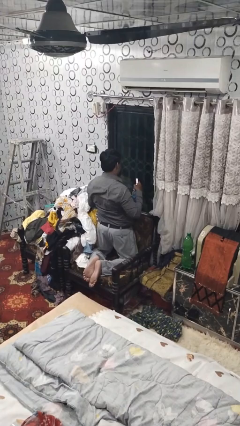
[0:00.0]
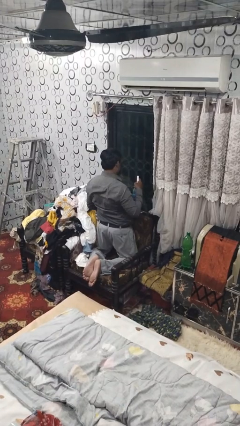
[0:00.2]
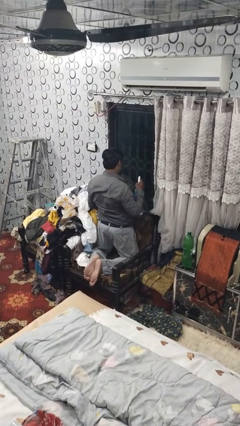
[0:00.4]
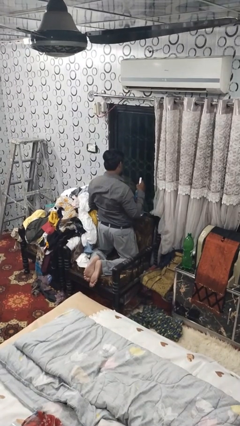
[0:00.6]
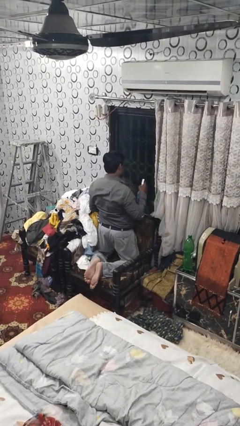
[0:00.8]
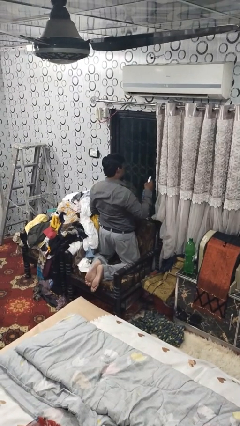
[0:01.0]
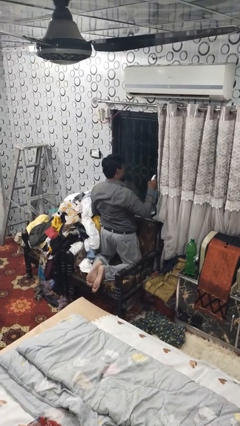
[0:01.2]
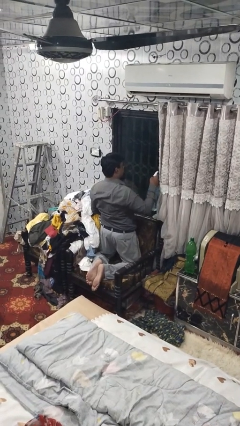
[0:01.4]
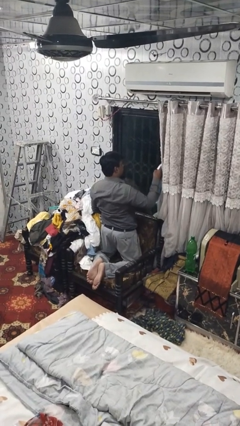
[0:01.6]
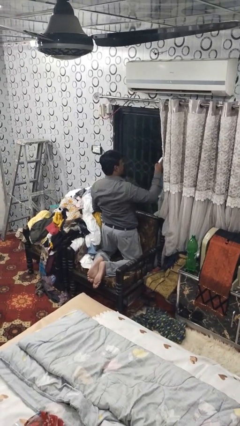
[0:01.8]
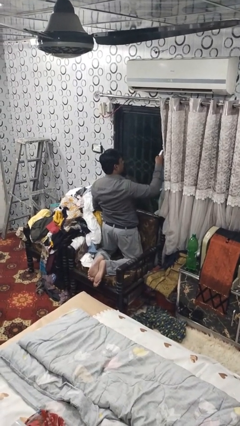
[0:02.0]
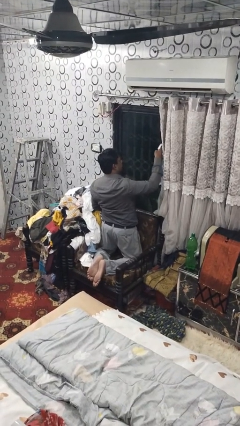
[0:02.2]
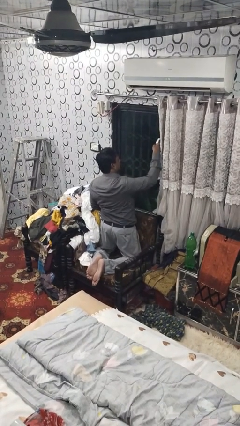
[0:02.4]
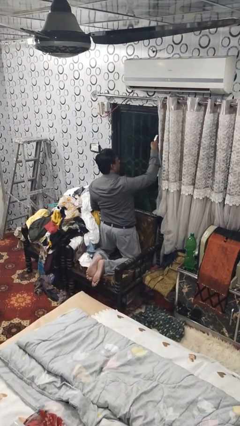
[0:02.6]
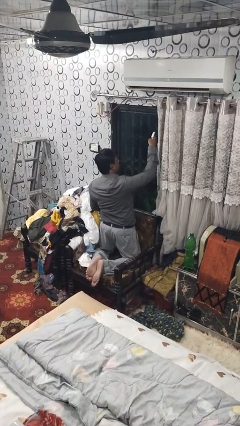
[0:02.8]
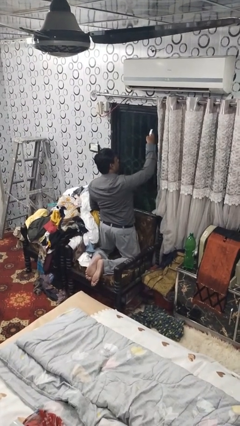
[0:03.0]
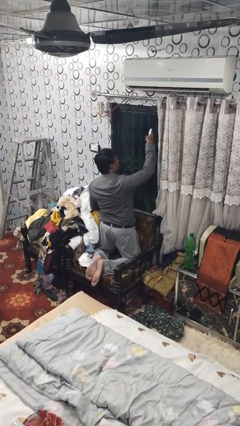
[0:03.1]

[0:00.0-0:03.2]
person sprays from bottle

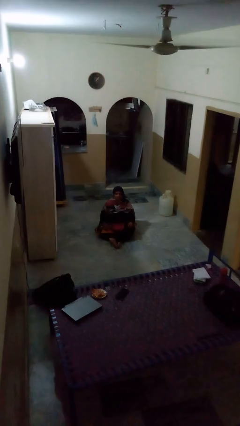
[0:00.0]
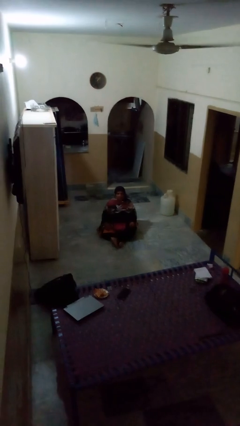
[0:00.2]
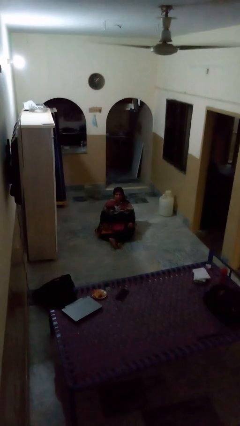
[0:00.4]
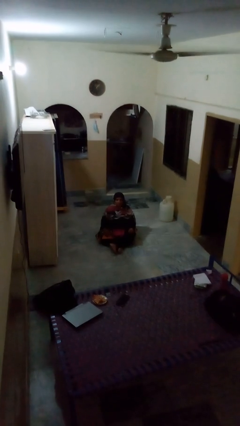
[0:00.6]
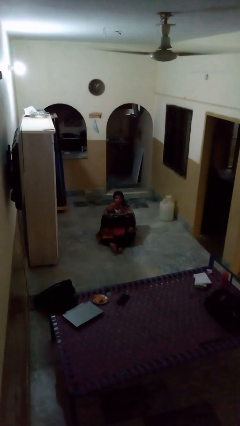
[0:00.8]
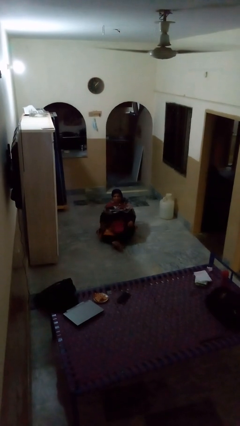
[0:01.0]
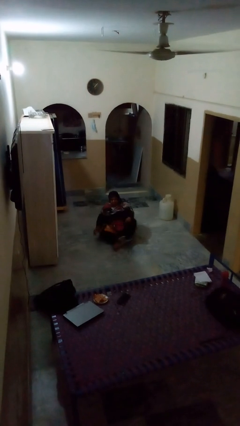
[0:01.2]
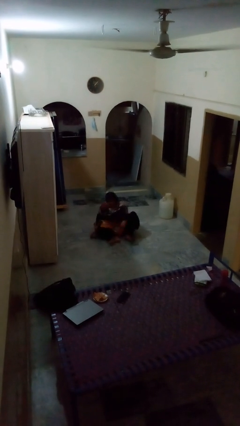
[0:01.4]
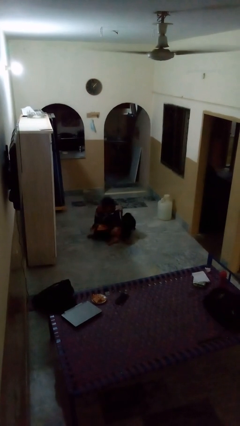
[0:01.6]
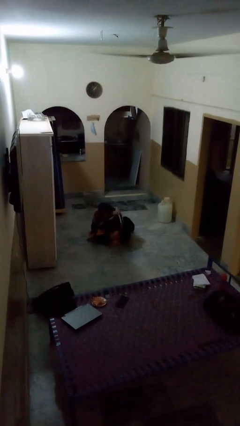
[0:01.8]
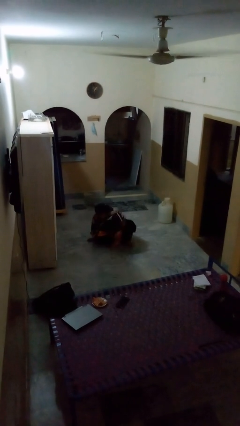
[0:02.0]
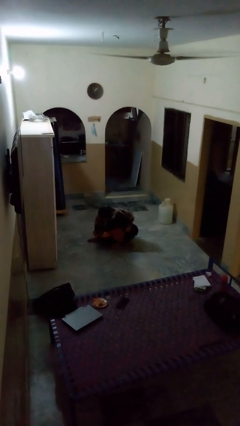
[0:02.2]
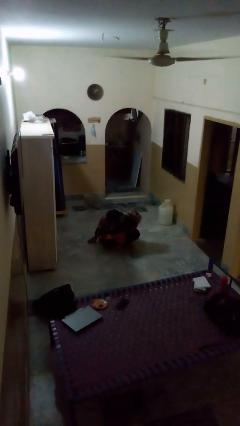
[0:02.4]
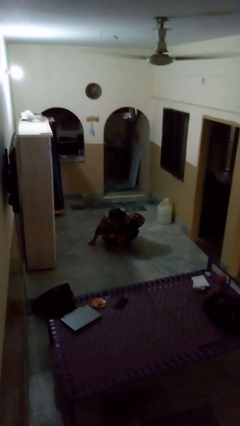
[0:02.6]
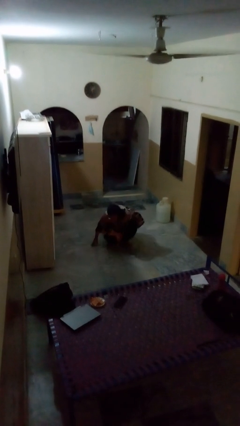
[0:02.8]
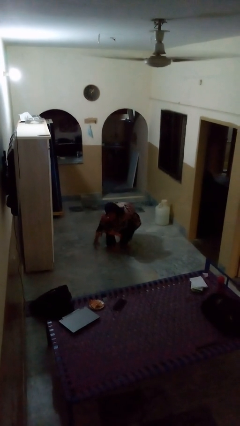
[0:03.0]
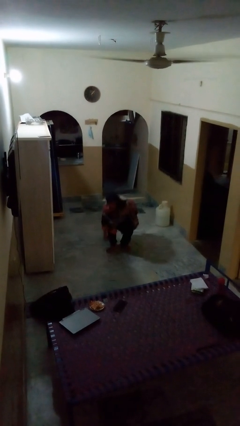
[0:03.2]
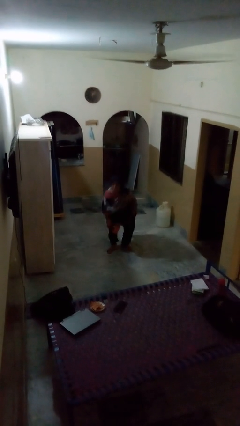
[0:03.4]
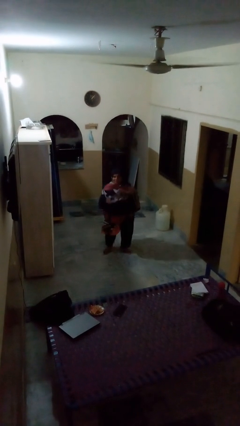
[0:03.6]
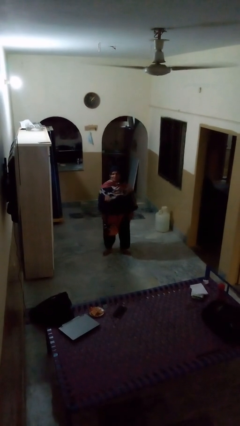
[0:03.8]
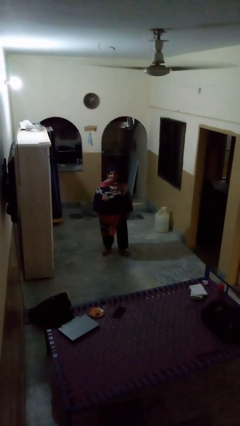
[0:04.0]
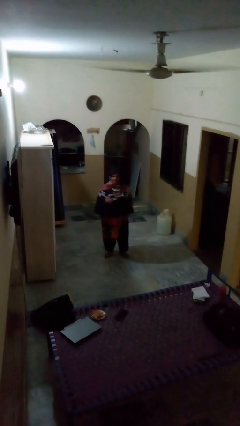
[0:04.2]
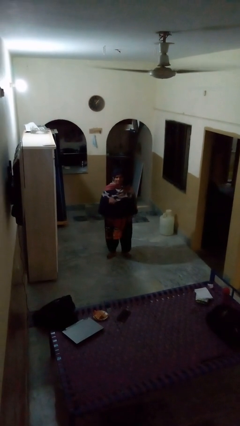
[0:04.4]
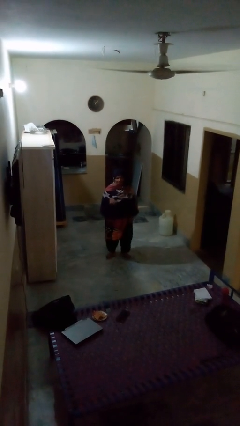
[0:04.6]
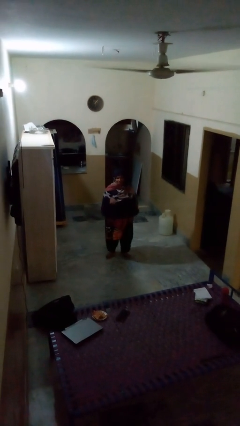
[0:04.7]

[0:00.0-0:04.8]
person stands up from floor

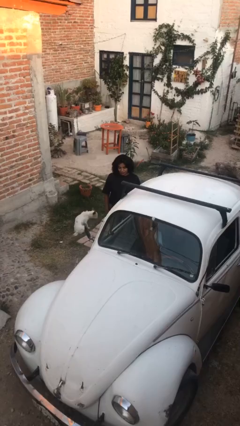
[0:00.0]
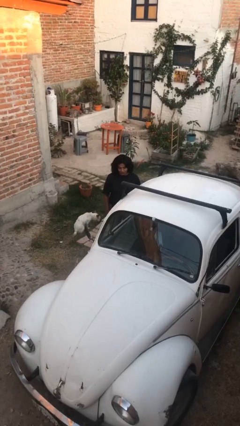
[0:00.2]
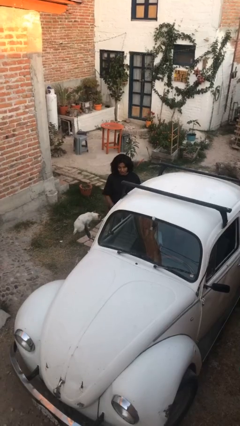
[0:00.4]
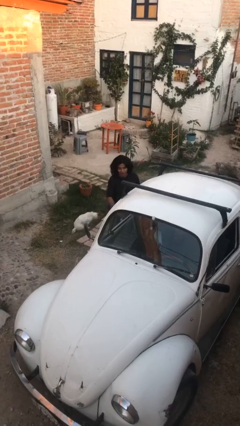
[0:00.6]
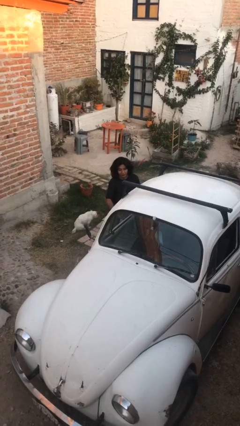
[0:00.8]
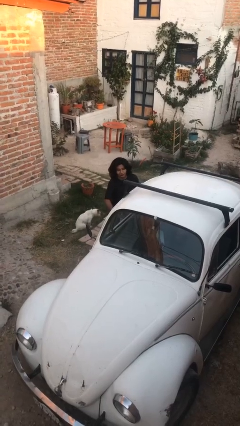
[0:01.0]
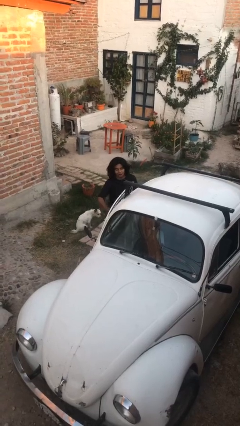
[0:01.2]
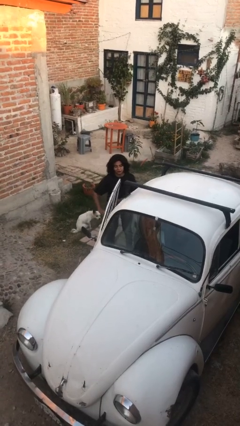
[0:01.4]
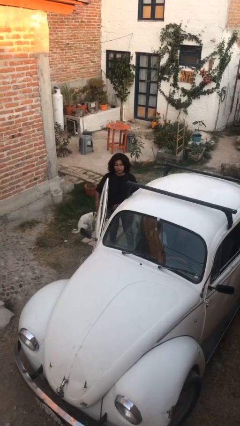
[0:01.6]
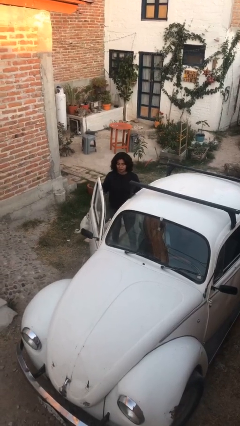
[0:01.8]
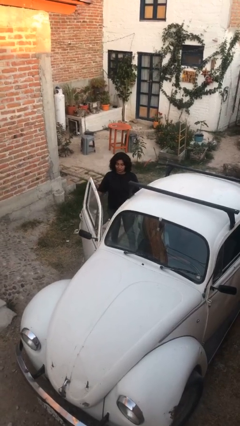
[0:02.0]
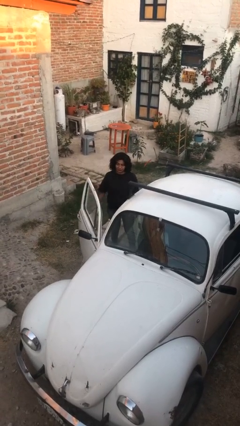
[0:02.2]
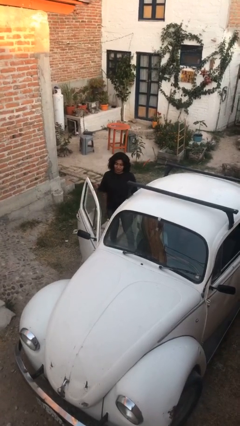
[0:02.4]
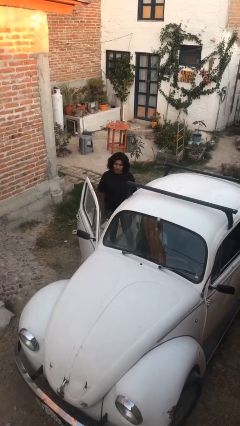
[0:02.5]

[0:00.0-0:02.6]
person opens car door

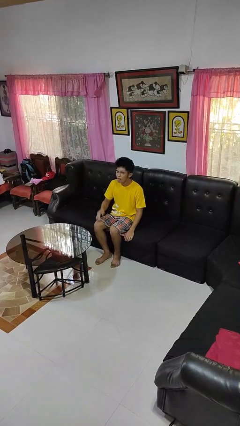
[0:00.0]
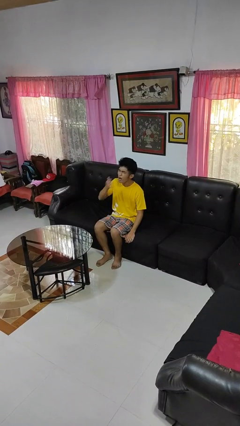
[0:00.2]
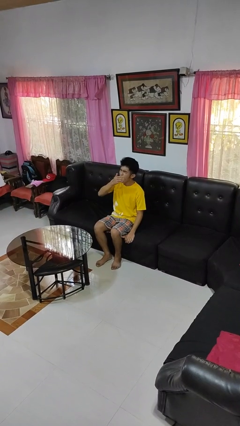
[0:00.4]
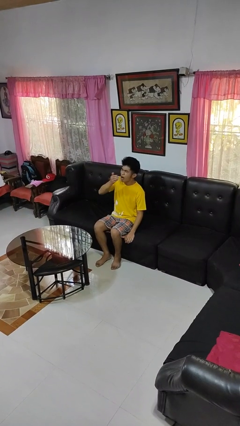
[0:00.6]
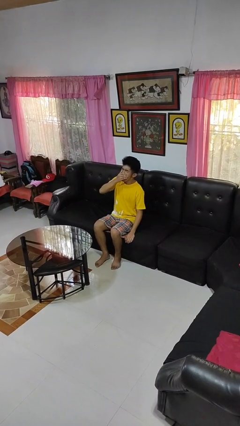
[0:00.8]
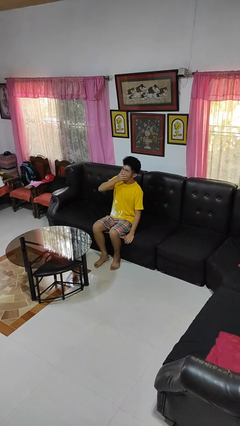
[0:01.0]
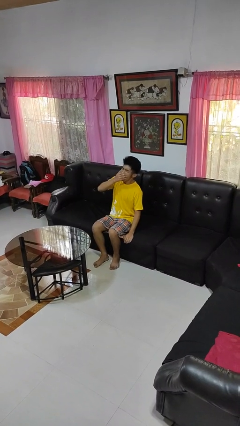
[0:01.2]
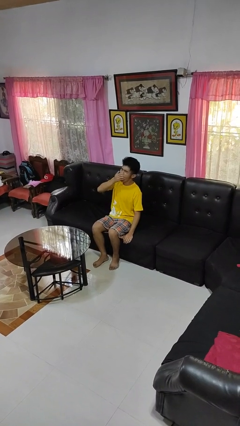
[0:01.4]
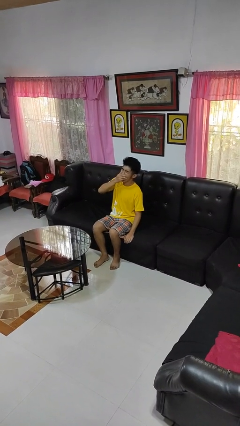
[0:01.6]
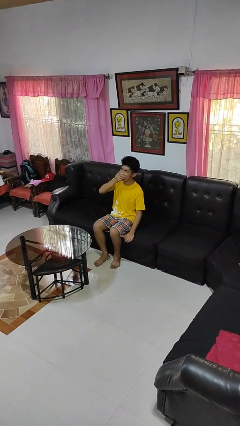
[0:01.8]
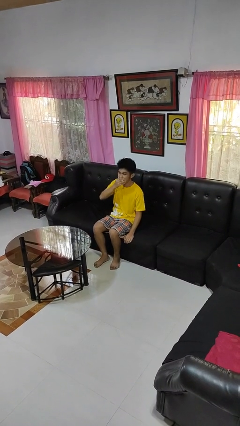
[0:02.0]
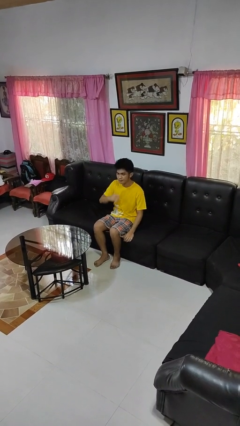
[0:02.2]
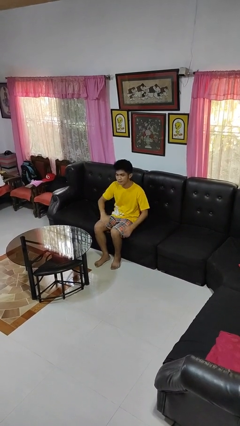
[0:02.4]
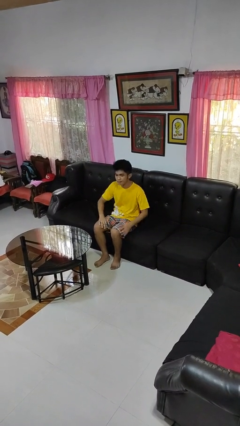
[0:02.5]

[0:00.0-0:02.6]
person yawns

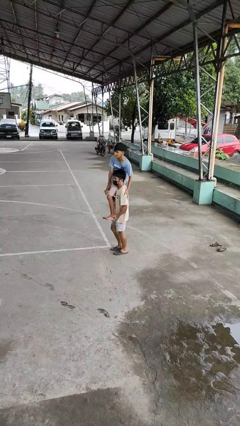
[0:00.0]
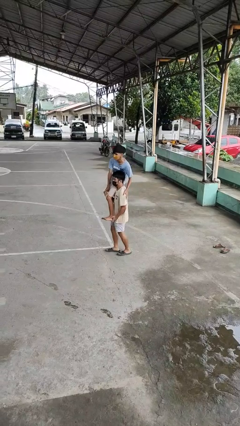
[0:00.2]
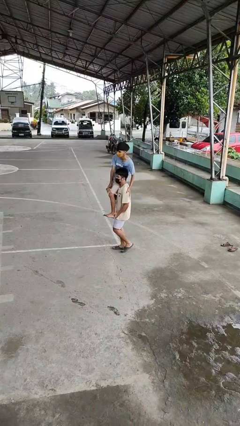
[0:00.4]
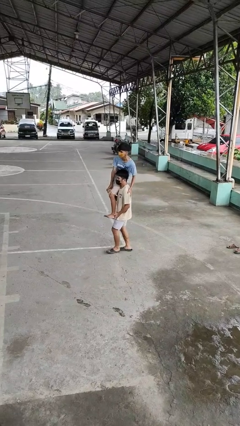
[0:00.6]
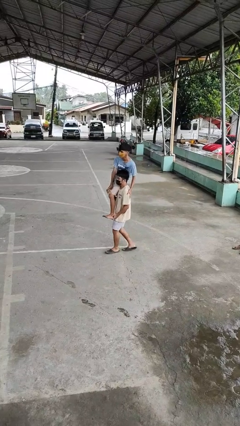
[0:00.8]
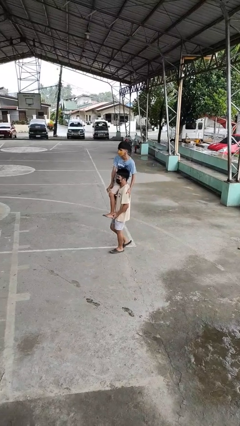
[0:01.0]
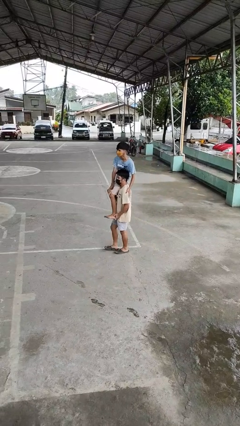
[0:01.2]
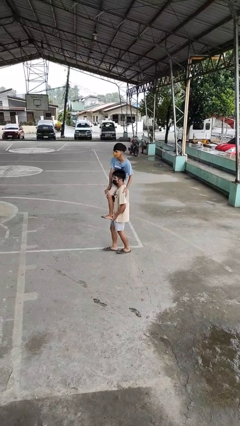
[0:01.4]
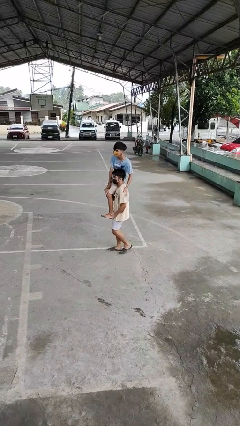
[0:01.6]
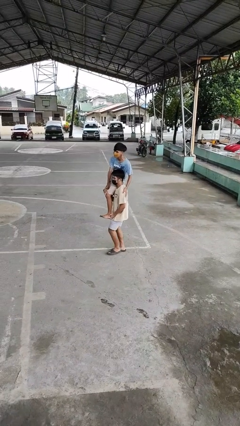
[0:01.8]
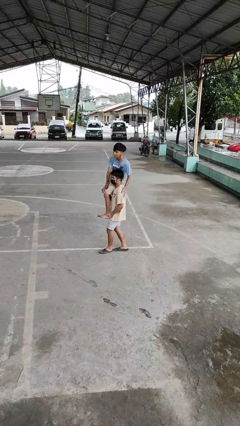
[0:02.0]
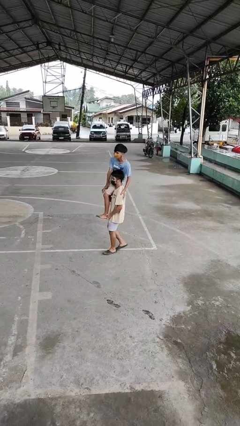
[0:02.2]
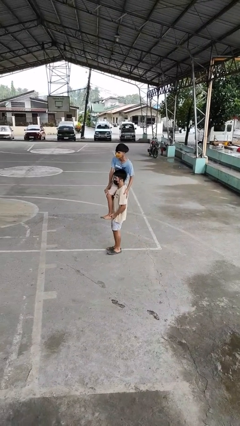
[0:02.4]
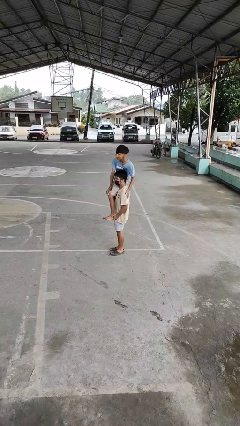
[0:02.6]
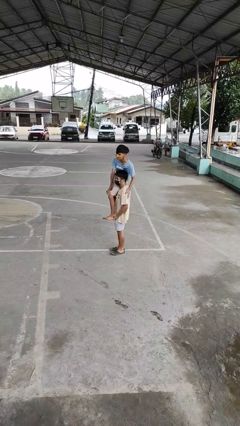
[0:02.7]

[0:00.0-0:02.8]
person carries person on shoulders

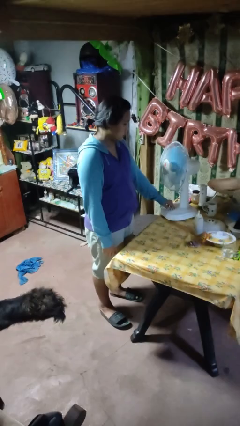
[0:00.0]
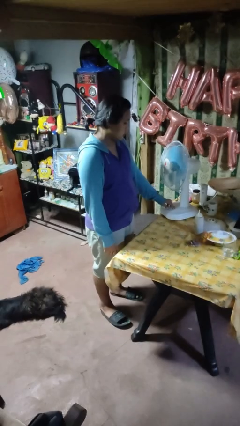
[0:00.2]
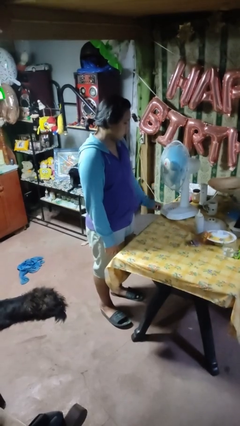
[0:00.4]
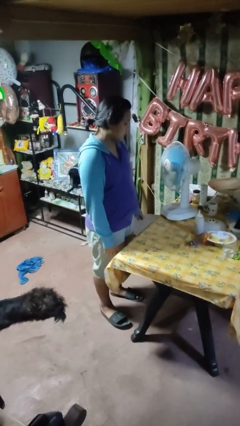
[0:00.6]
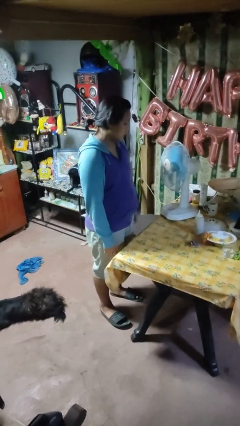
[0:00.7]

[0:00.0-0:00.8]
person turns off fan

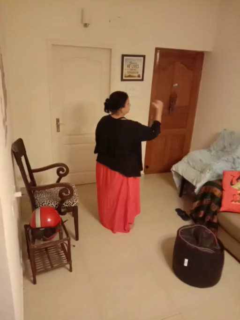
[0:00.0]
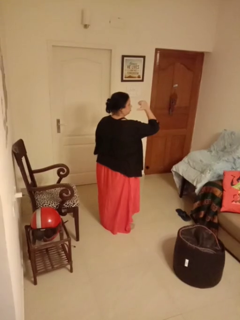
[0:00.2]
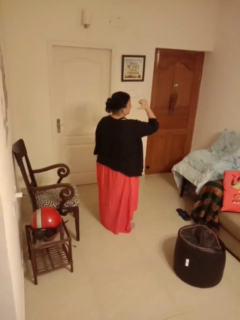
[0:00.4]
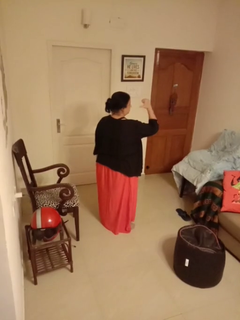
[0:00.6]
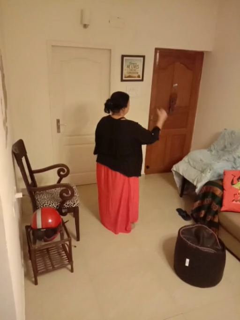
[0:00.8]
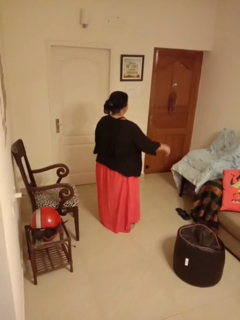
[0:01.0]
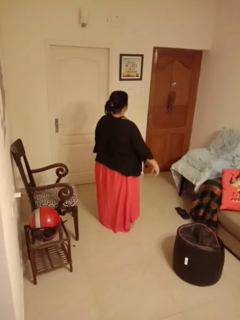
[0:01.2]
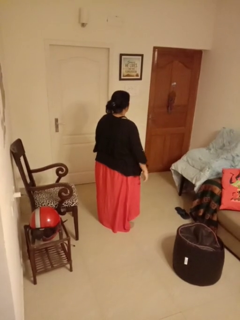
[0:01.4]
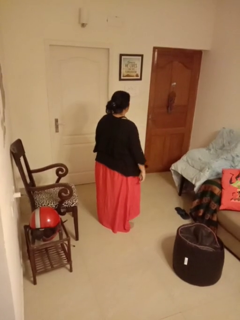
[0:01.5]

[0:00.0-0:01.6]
person gestures behind me
